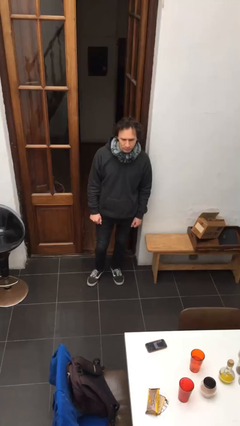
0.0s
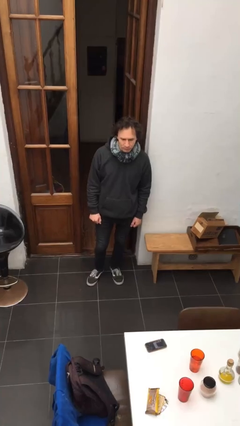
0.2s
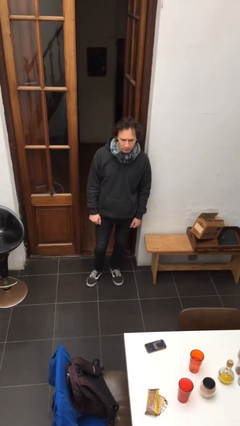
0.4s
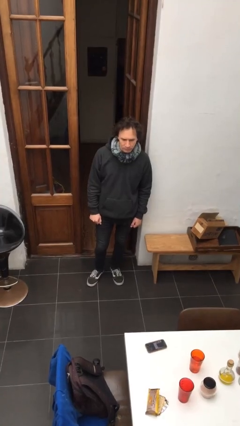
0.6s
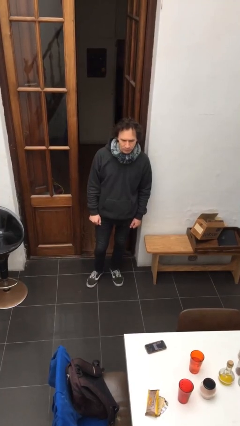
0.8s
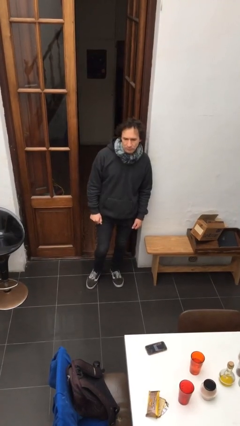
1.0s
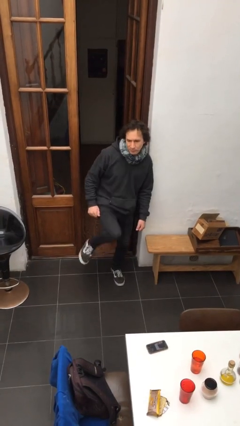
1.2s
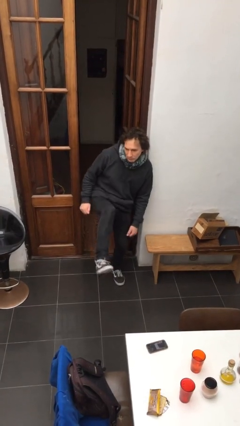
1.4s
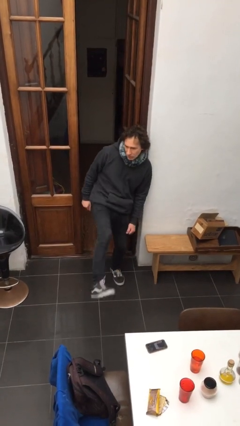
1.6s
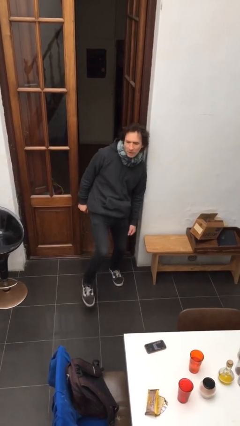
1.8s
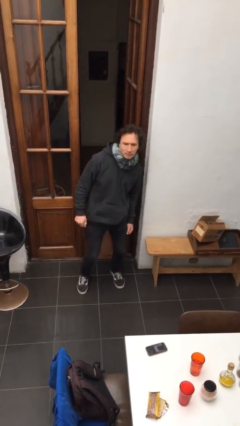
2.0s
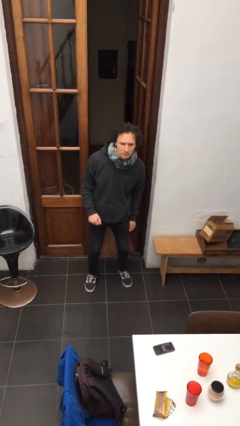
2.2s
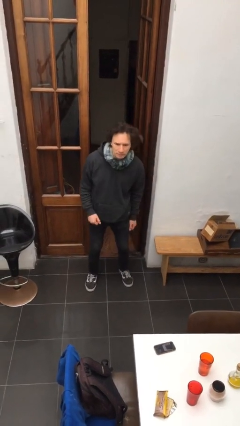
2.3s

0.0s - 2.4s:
person karate kicks

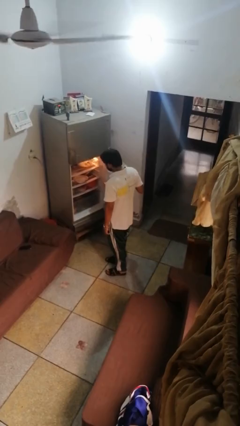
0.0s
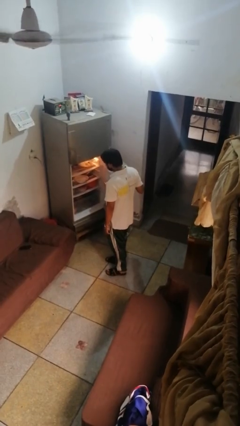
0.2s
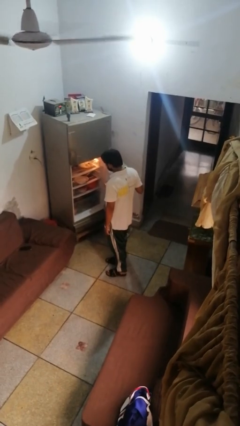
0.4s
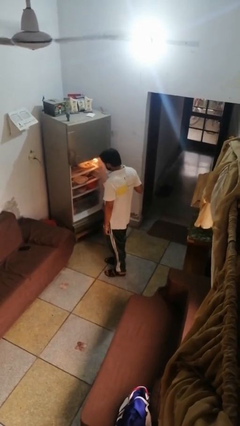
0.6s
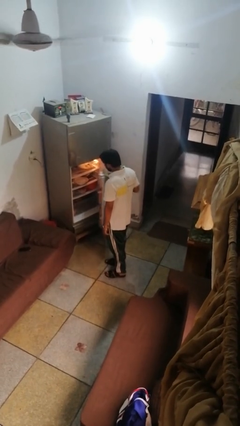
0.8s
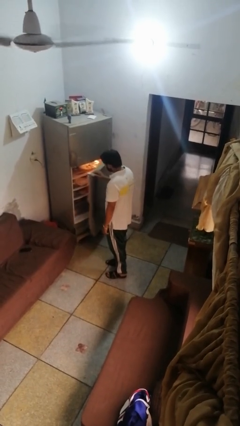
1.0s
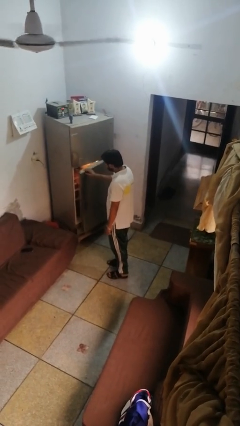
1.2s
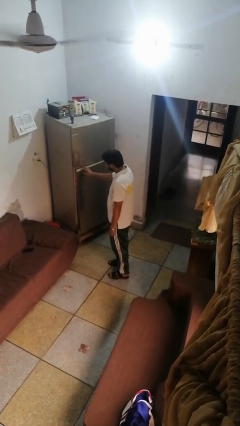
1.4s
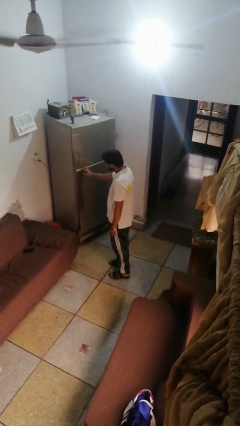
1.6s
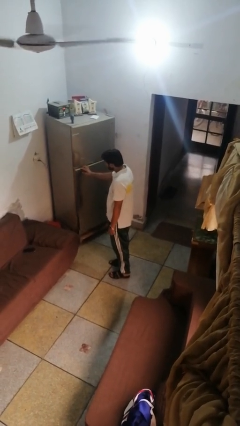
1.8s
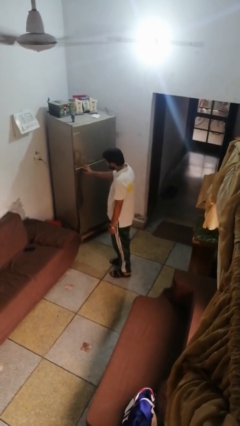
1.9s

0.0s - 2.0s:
person closes refrigerator

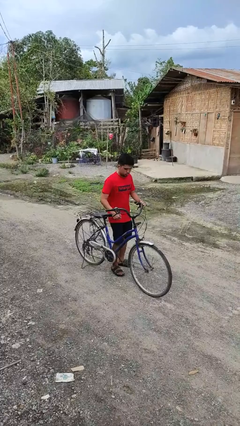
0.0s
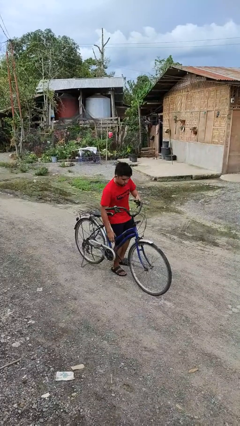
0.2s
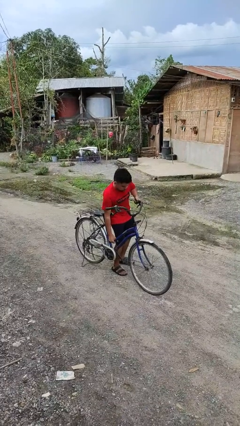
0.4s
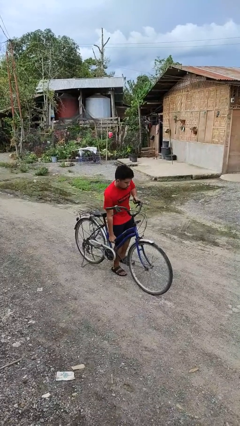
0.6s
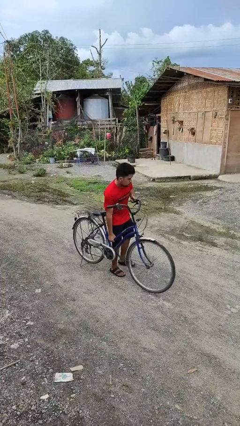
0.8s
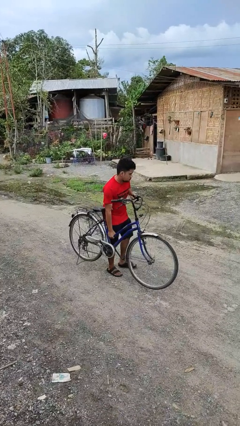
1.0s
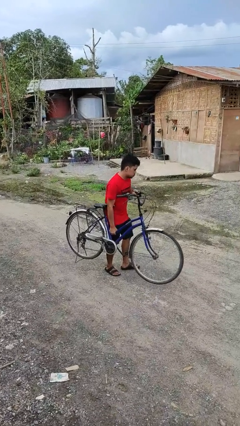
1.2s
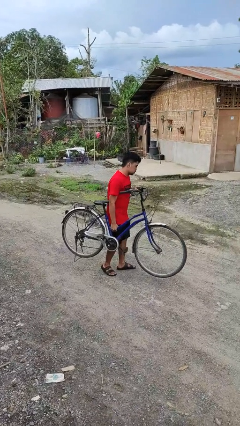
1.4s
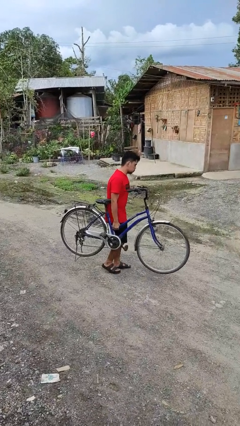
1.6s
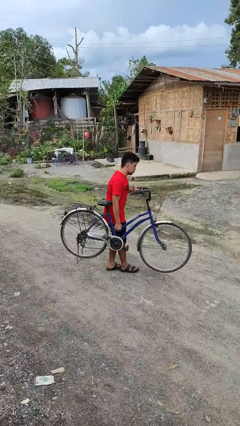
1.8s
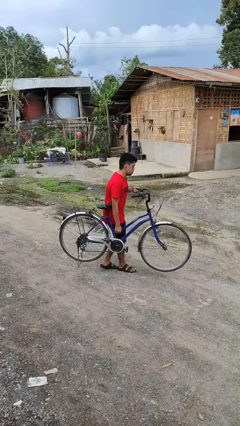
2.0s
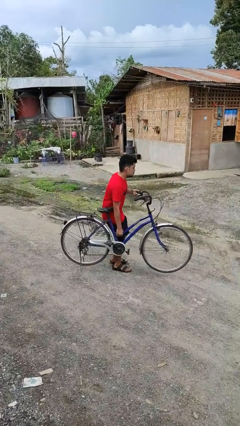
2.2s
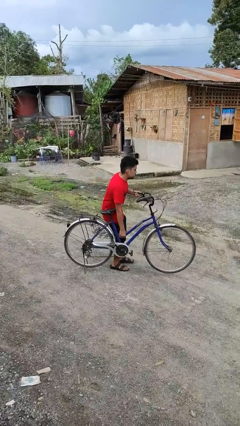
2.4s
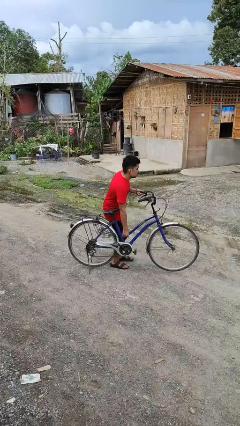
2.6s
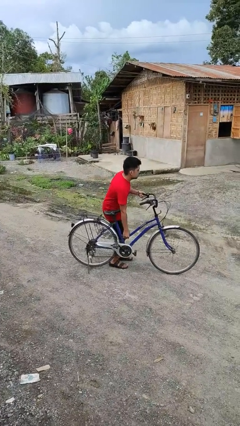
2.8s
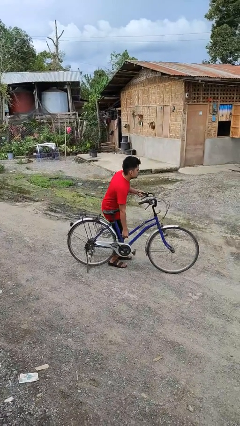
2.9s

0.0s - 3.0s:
person carries bicycle

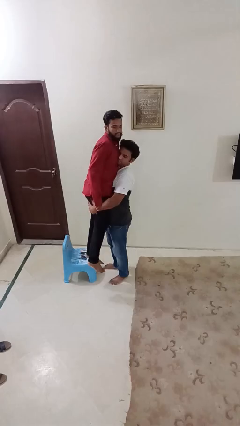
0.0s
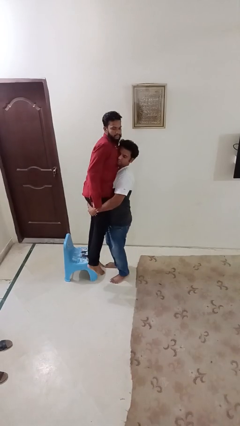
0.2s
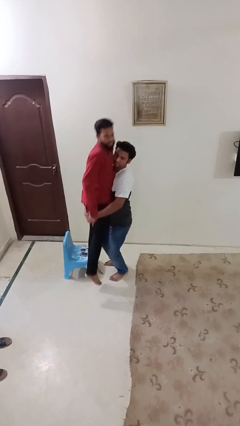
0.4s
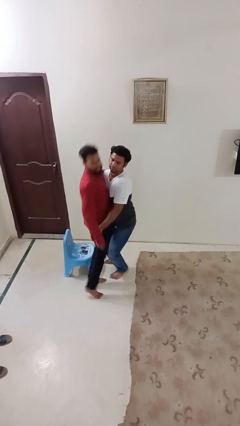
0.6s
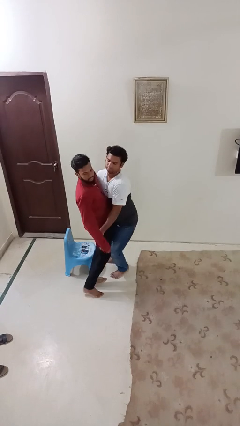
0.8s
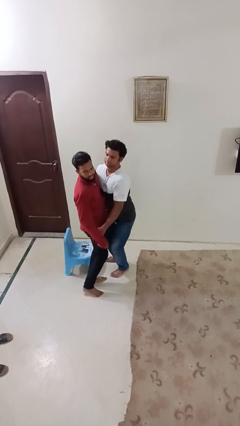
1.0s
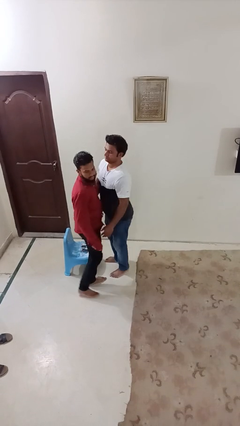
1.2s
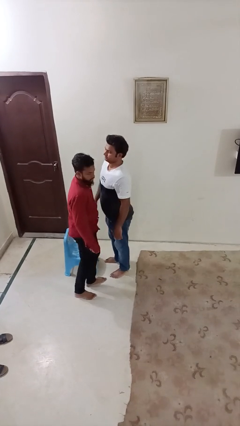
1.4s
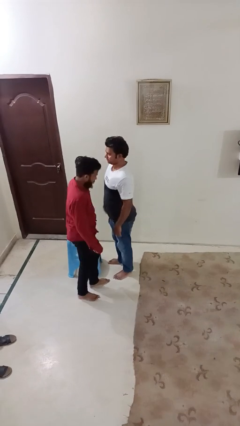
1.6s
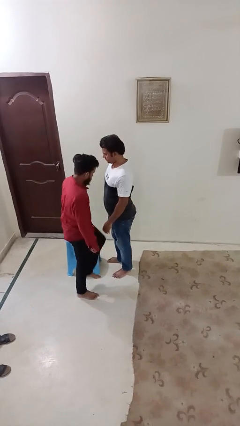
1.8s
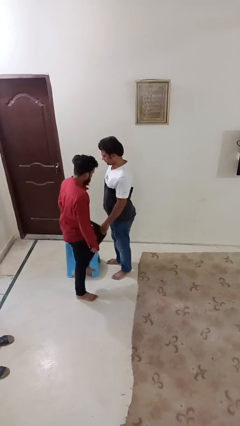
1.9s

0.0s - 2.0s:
person puts down person

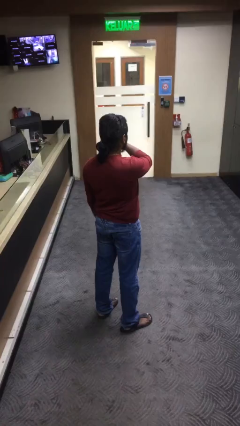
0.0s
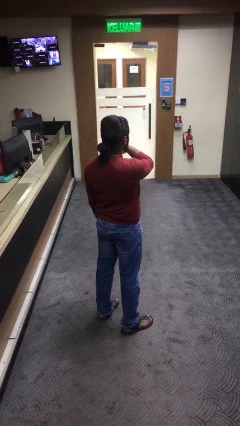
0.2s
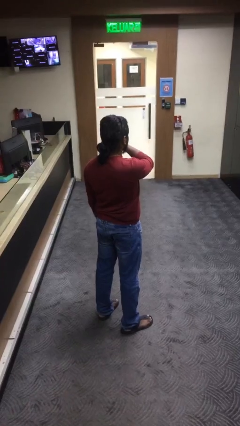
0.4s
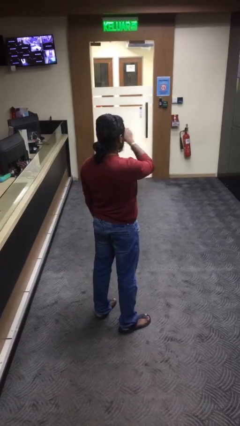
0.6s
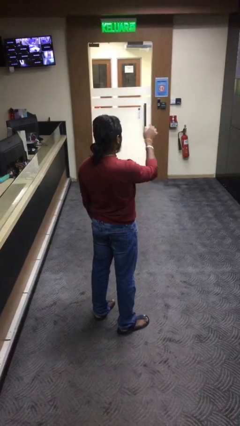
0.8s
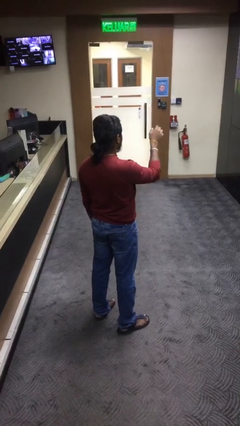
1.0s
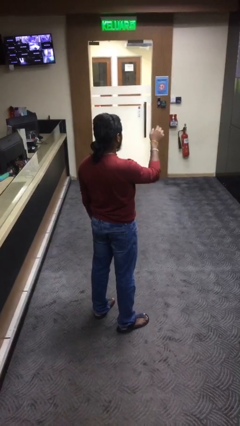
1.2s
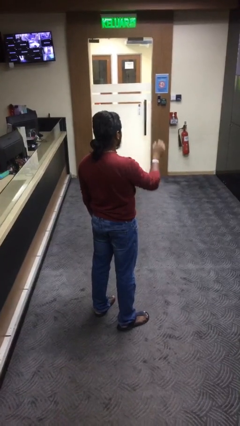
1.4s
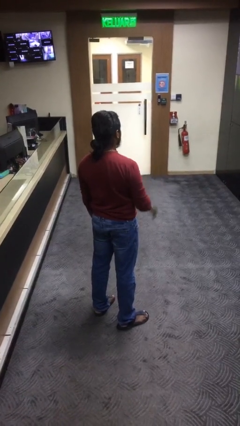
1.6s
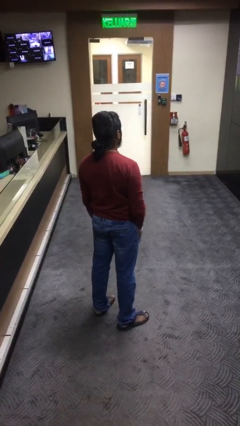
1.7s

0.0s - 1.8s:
person gestures swipe right

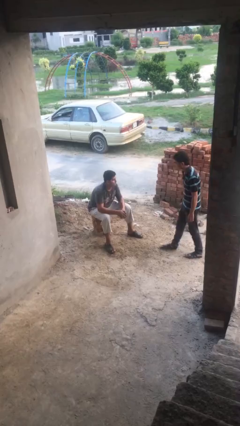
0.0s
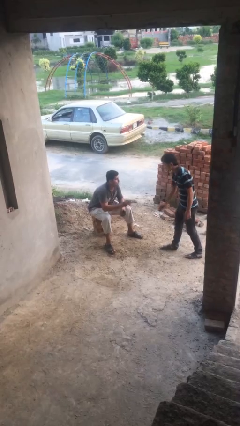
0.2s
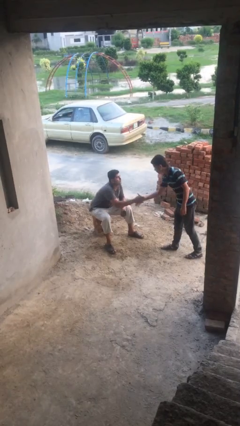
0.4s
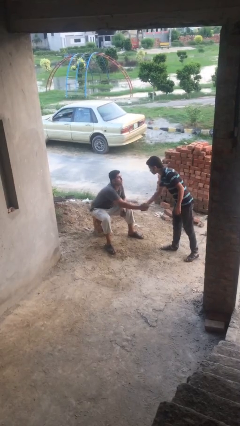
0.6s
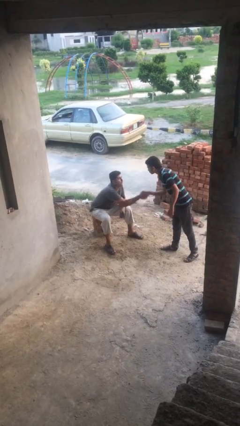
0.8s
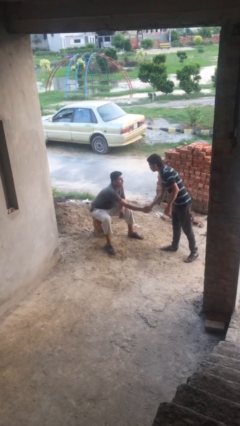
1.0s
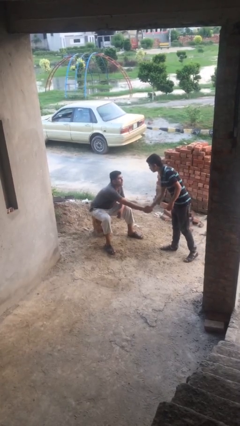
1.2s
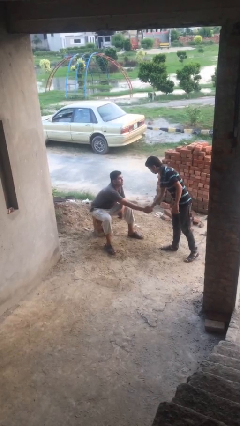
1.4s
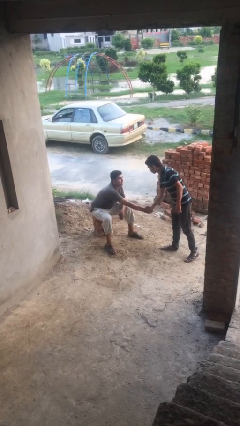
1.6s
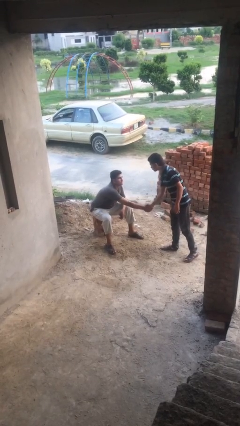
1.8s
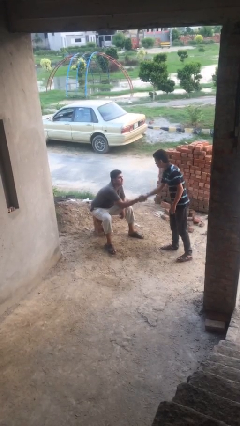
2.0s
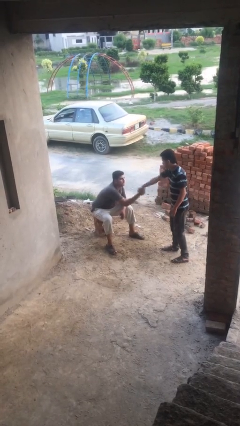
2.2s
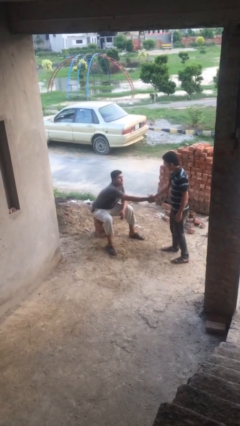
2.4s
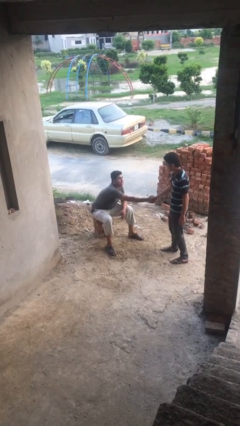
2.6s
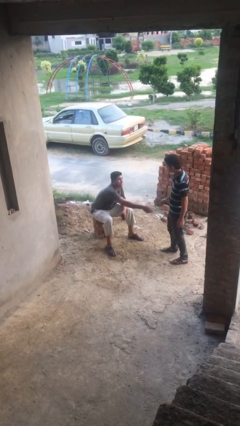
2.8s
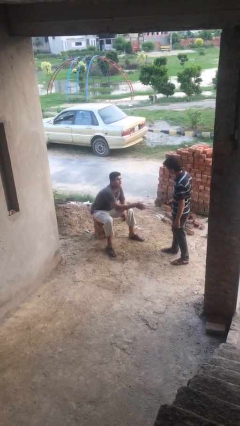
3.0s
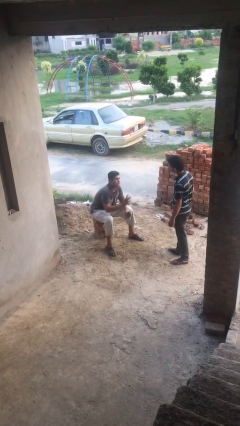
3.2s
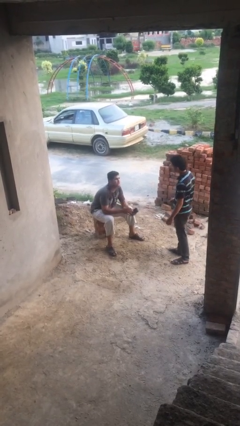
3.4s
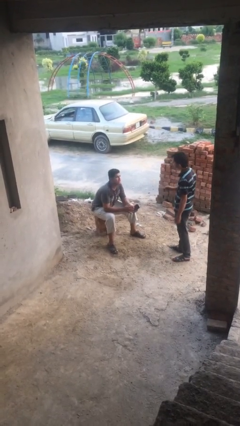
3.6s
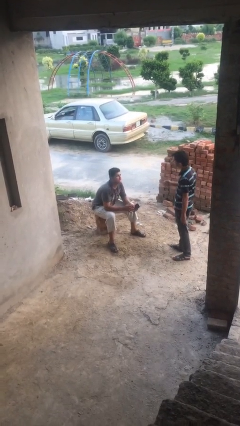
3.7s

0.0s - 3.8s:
person shakes hand

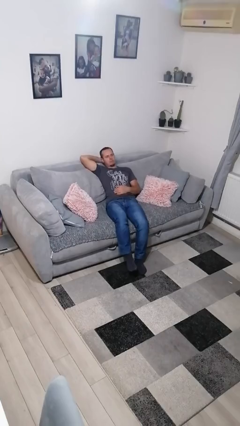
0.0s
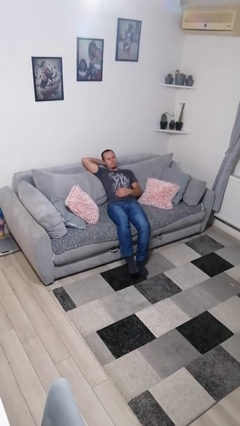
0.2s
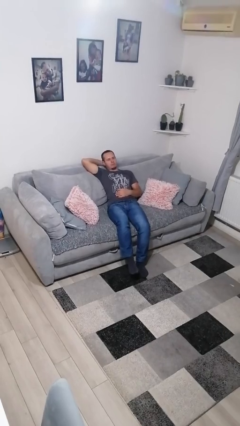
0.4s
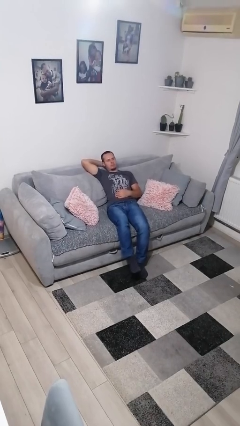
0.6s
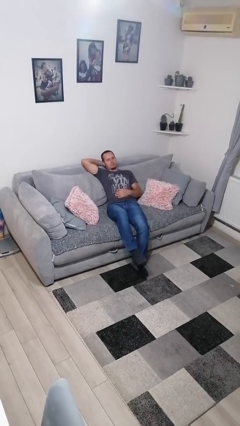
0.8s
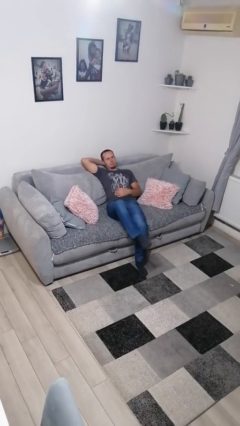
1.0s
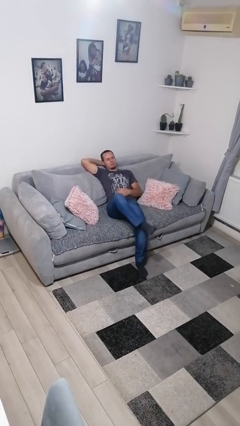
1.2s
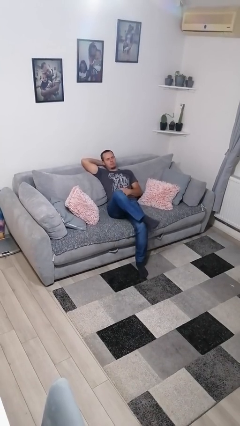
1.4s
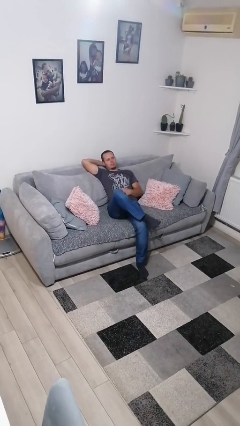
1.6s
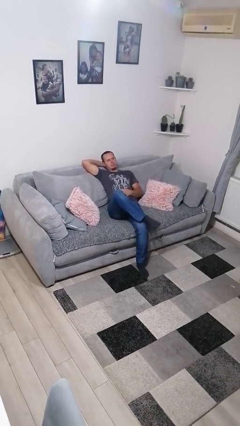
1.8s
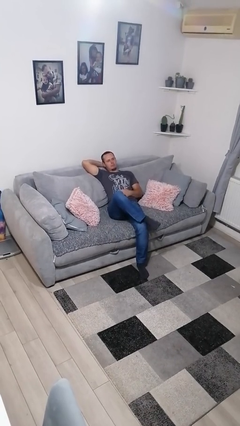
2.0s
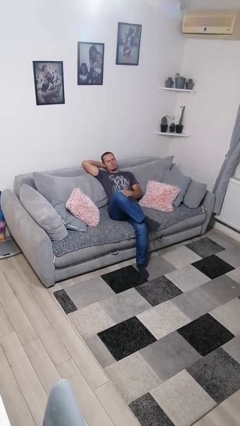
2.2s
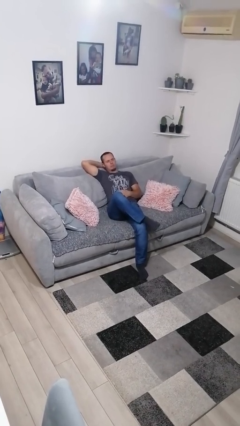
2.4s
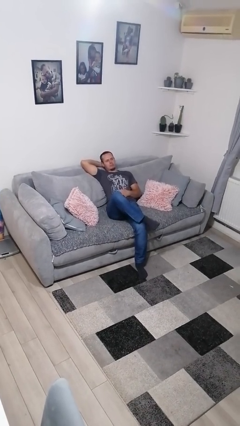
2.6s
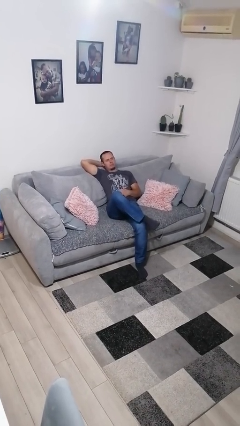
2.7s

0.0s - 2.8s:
person crosses legs
